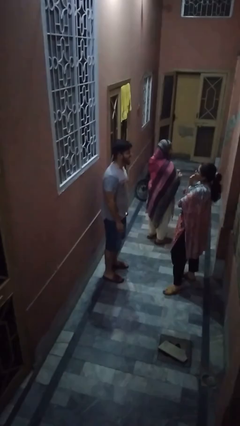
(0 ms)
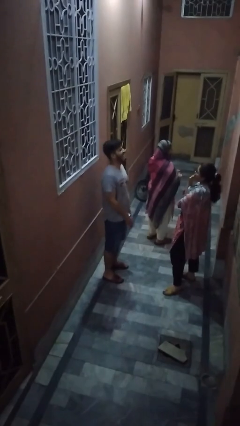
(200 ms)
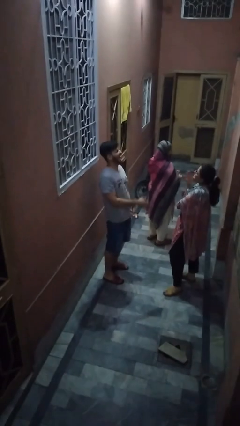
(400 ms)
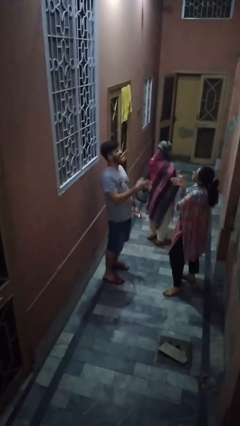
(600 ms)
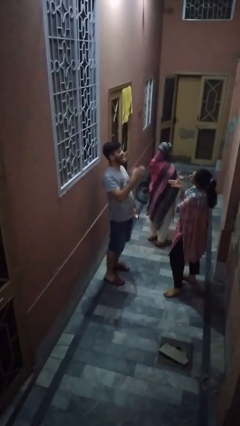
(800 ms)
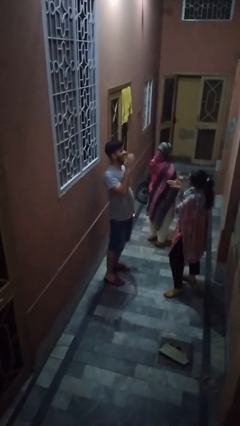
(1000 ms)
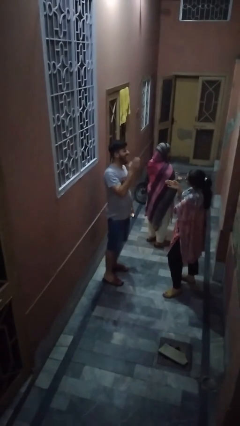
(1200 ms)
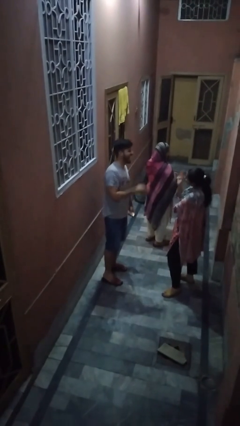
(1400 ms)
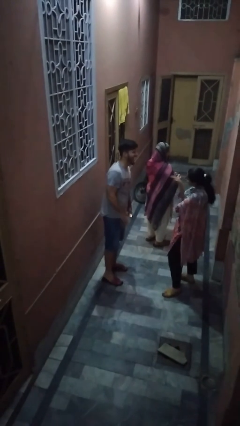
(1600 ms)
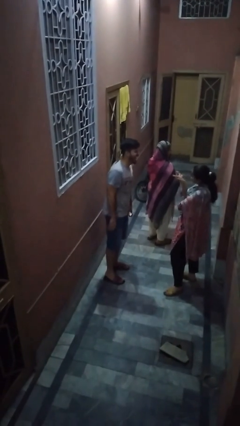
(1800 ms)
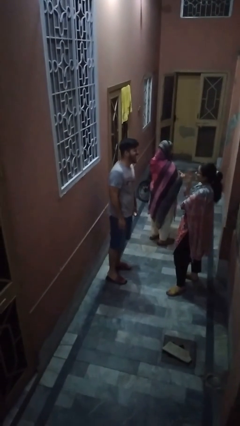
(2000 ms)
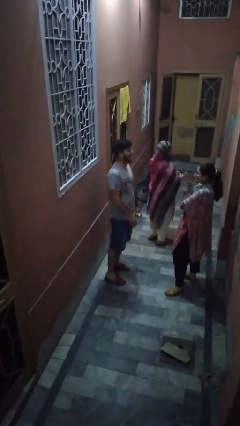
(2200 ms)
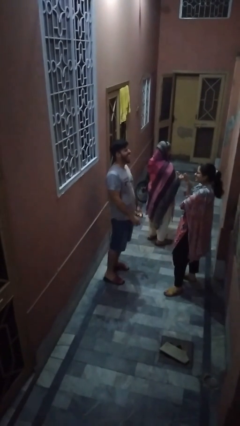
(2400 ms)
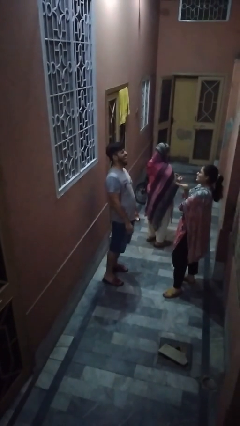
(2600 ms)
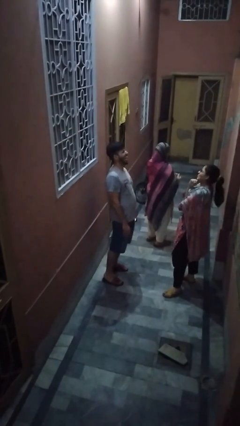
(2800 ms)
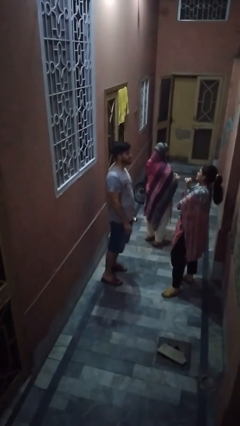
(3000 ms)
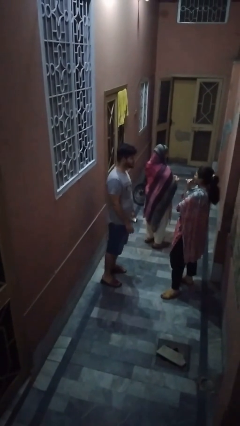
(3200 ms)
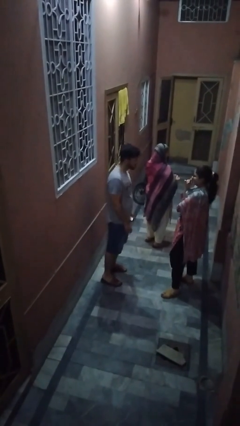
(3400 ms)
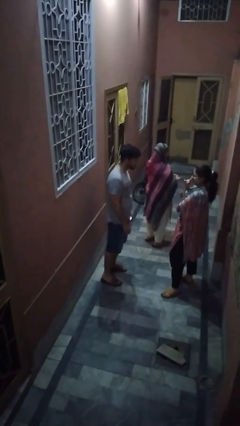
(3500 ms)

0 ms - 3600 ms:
person laughs with person

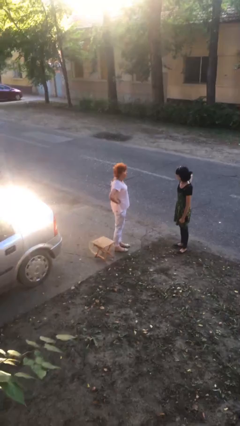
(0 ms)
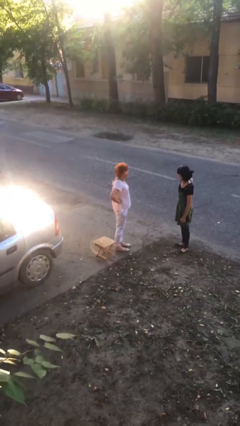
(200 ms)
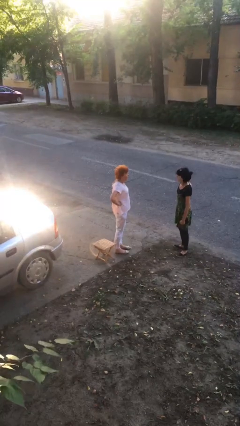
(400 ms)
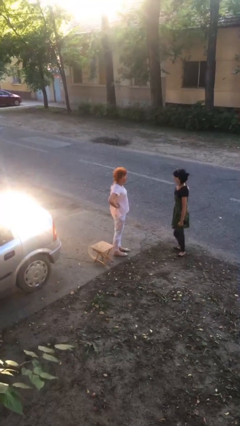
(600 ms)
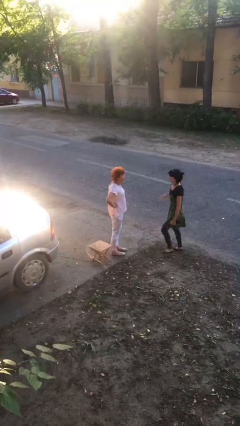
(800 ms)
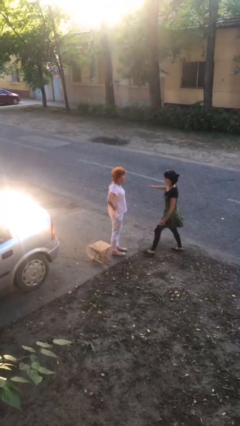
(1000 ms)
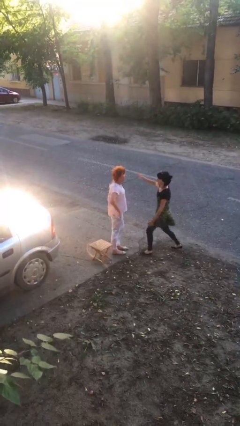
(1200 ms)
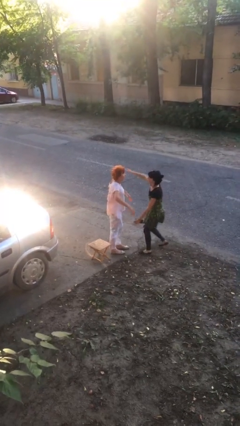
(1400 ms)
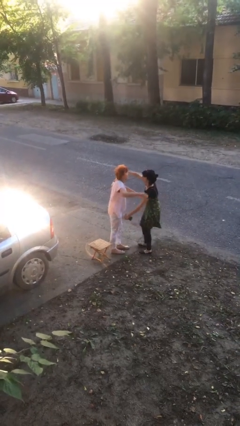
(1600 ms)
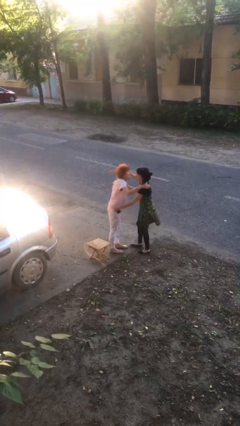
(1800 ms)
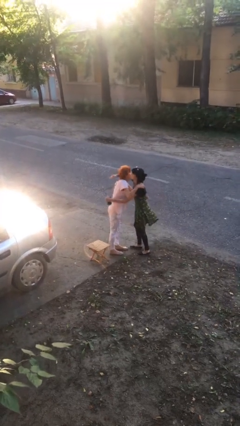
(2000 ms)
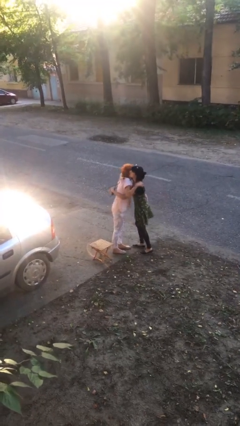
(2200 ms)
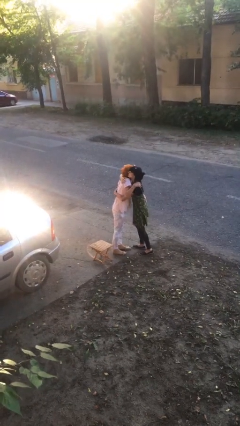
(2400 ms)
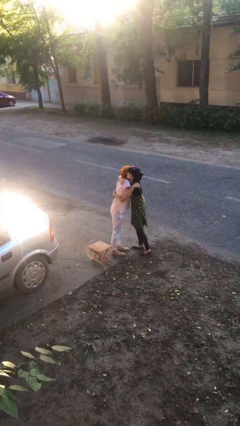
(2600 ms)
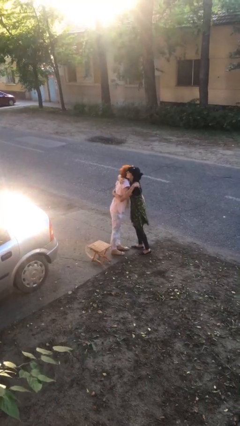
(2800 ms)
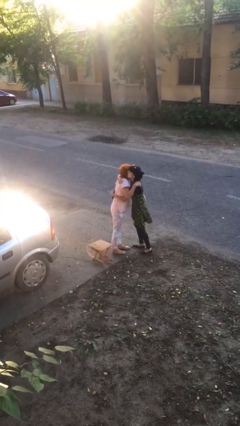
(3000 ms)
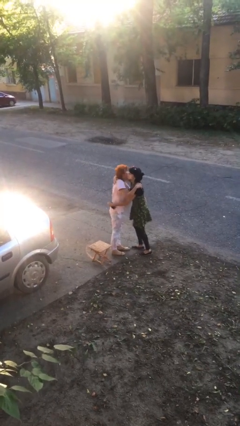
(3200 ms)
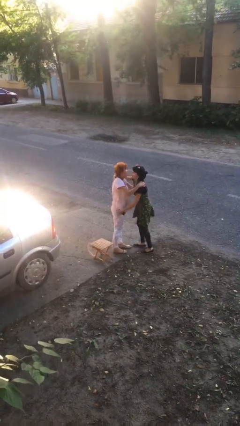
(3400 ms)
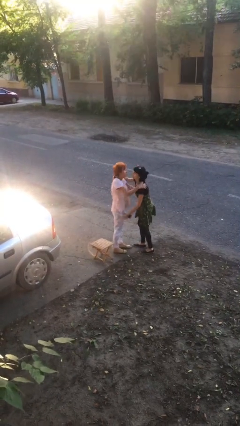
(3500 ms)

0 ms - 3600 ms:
person embraces person

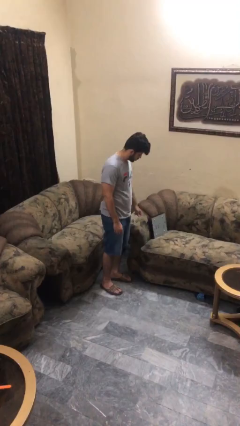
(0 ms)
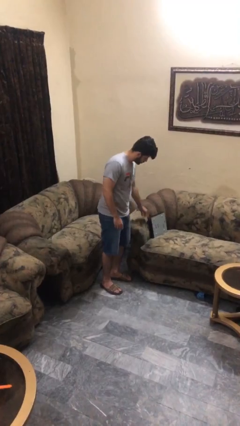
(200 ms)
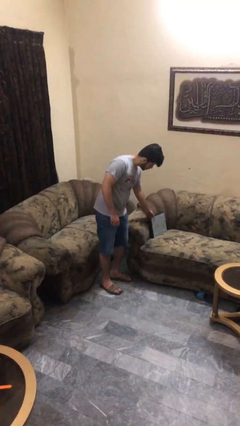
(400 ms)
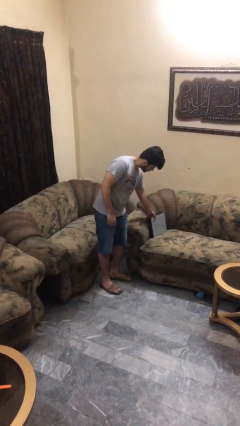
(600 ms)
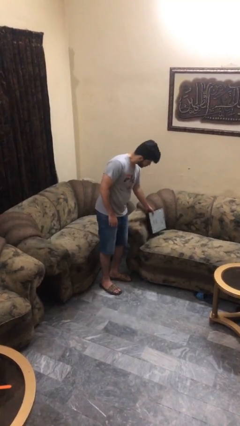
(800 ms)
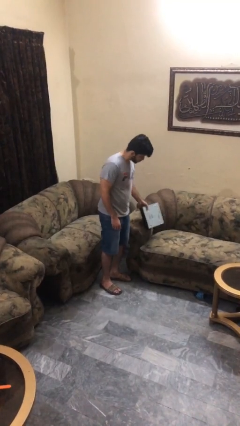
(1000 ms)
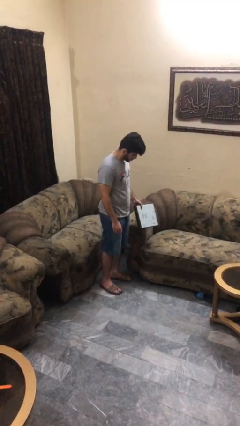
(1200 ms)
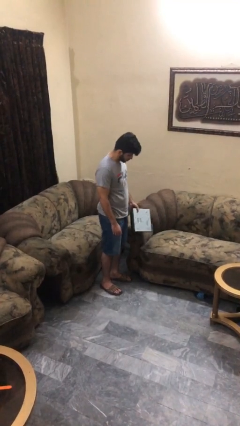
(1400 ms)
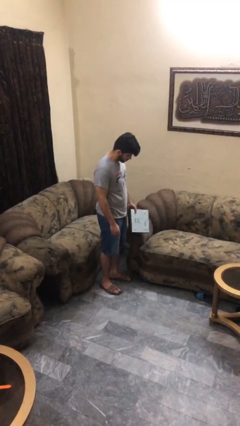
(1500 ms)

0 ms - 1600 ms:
person picks up object from couch

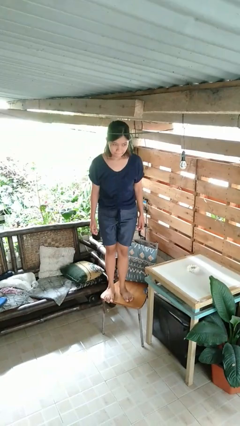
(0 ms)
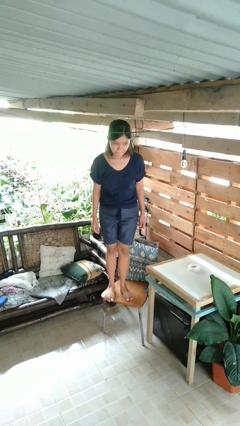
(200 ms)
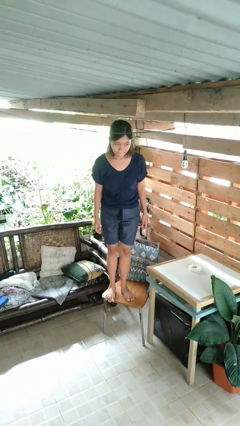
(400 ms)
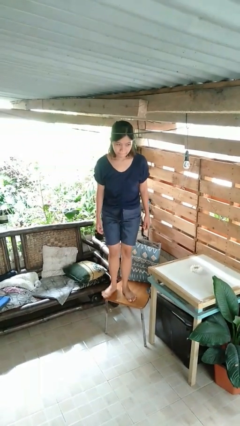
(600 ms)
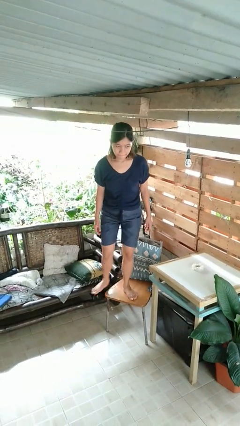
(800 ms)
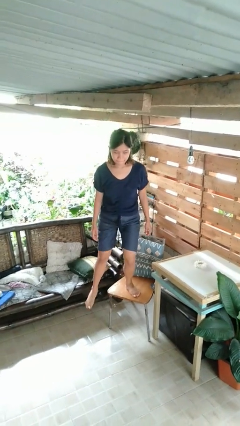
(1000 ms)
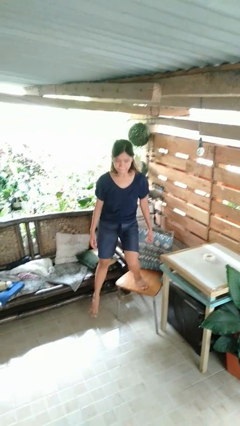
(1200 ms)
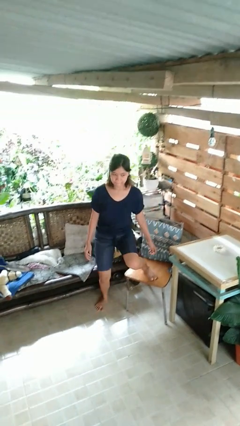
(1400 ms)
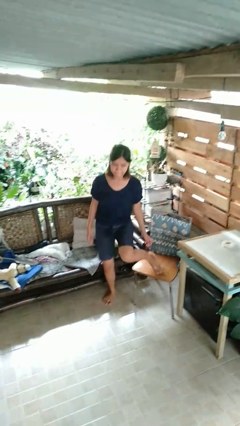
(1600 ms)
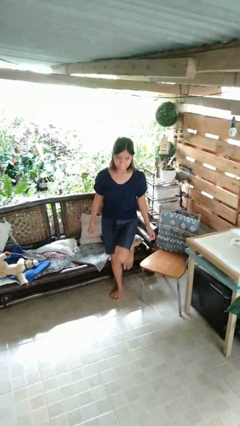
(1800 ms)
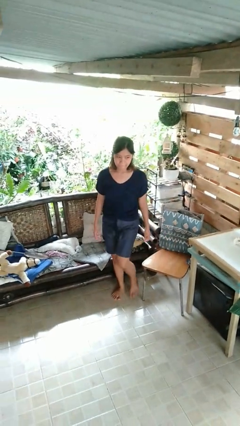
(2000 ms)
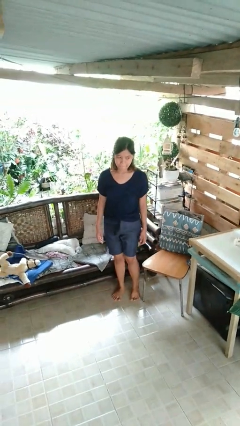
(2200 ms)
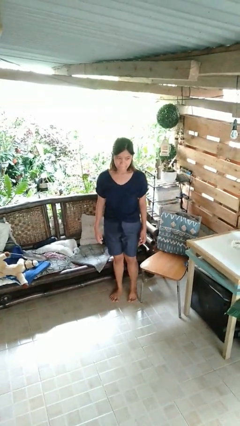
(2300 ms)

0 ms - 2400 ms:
person climbs off chair

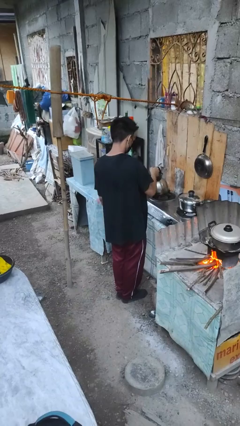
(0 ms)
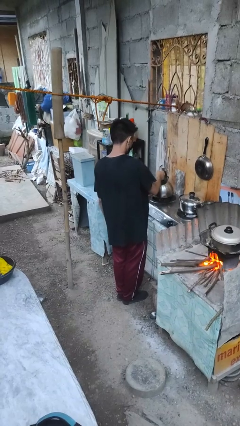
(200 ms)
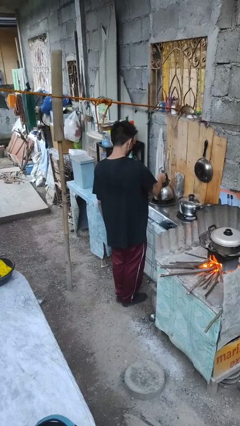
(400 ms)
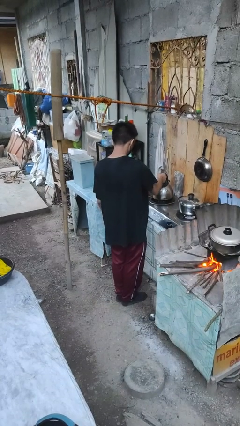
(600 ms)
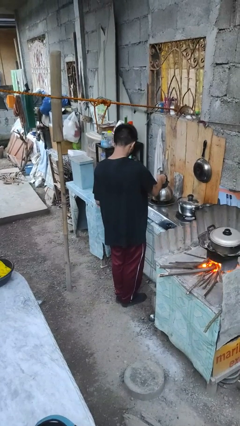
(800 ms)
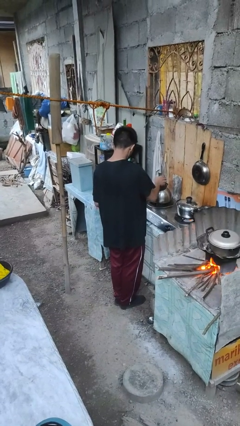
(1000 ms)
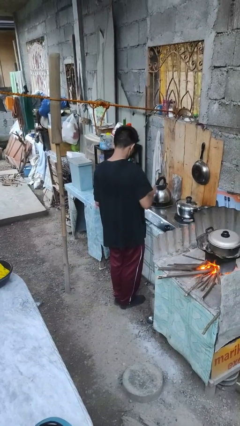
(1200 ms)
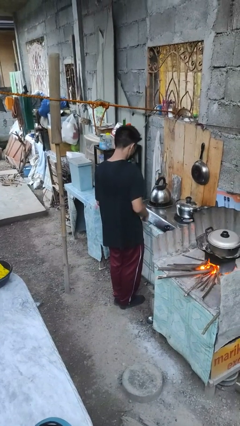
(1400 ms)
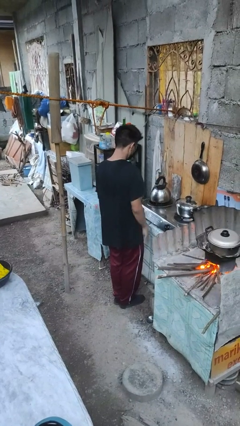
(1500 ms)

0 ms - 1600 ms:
person puts down object on countertop

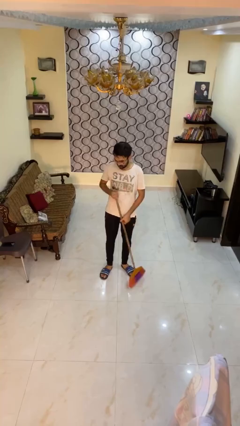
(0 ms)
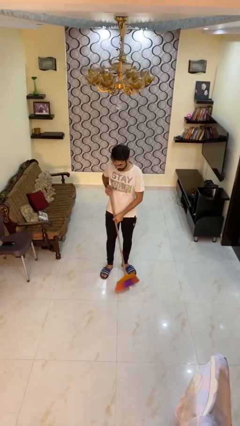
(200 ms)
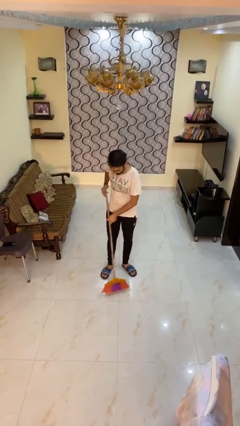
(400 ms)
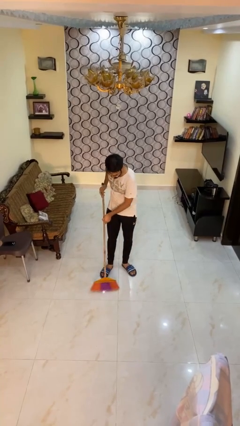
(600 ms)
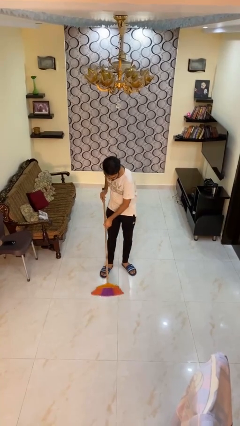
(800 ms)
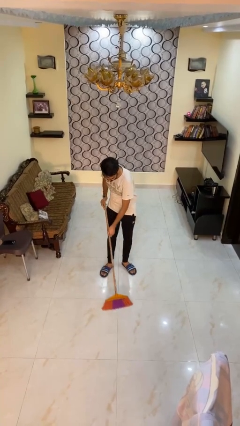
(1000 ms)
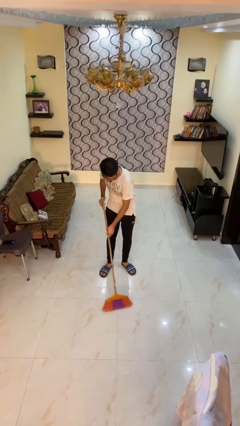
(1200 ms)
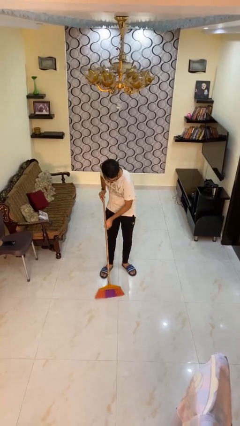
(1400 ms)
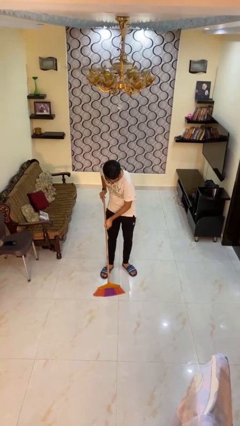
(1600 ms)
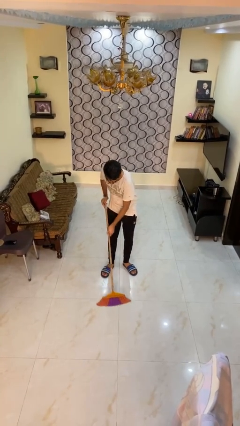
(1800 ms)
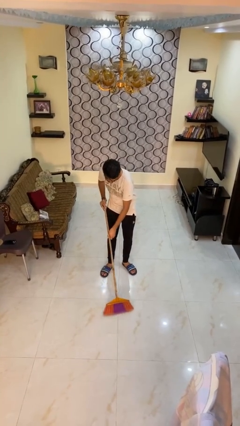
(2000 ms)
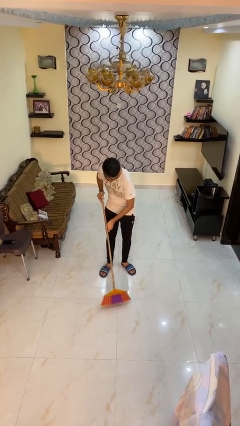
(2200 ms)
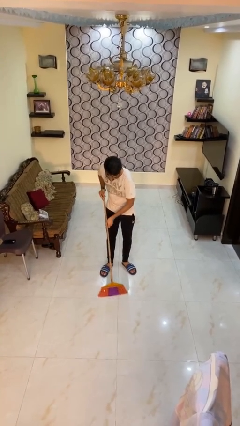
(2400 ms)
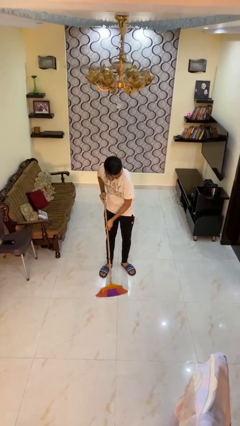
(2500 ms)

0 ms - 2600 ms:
person mops

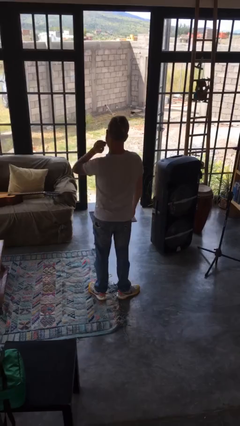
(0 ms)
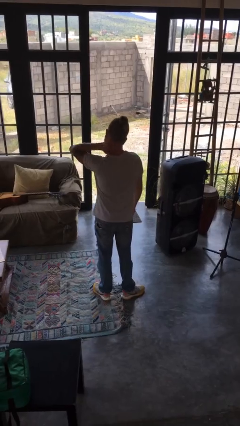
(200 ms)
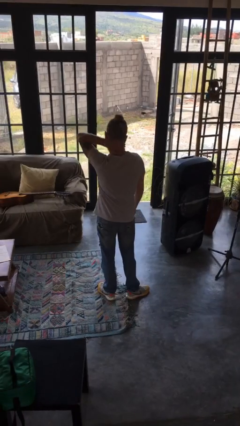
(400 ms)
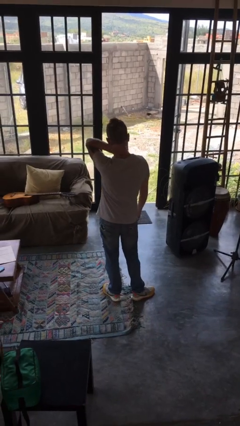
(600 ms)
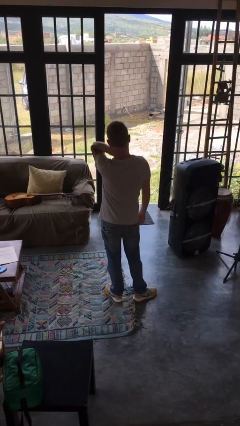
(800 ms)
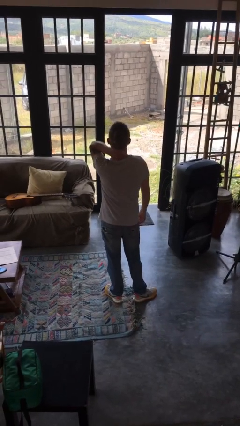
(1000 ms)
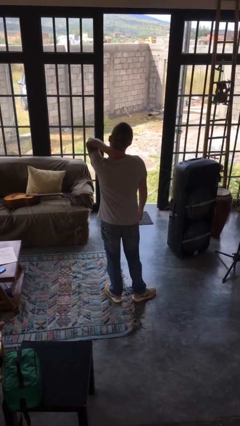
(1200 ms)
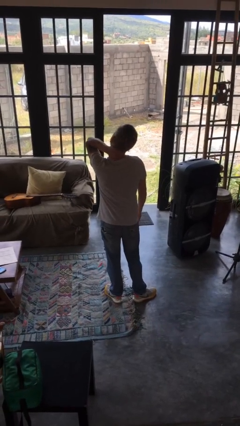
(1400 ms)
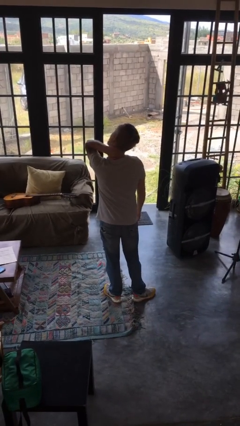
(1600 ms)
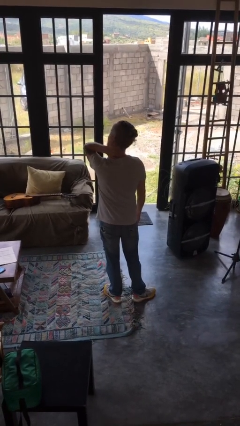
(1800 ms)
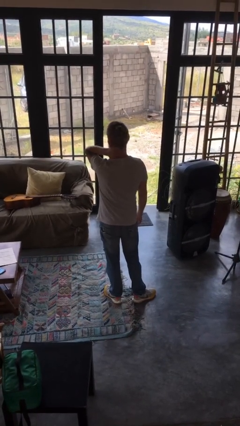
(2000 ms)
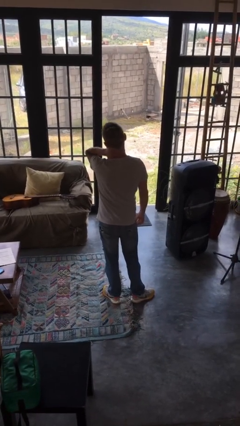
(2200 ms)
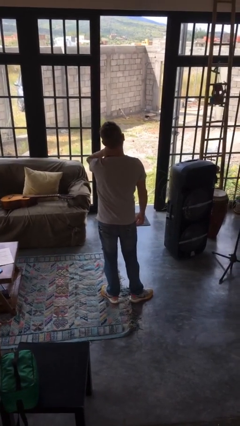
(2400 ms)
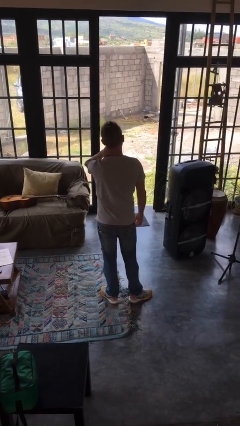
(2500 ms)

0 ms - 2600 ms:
person rubs neck
